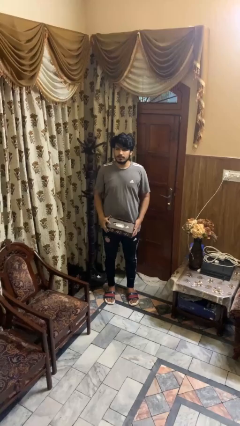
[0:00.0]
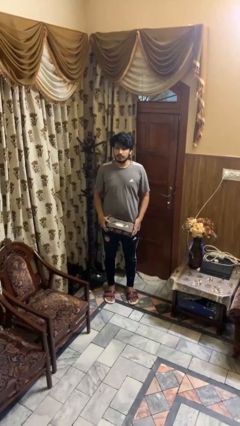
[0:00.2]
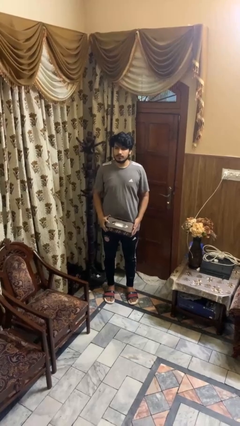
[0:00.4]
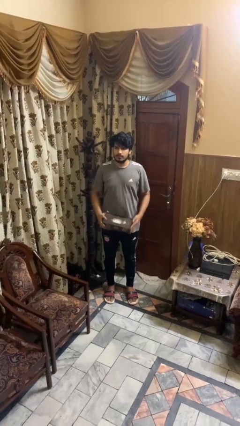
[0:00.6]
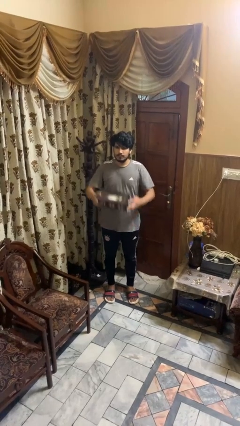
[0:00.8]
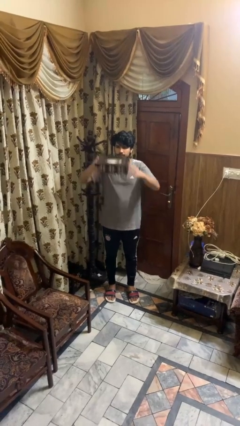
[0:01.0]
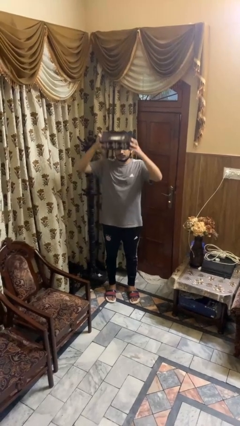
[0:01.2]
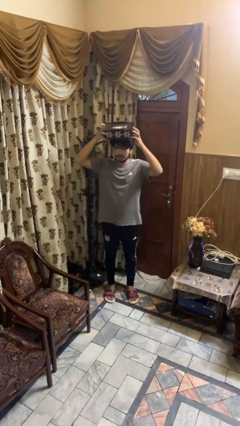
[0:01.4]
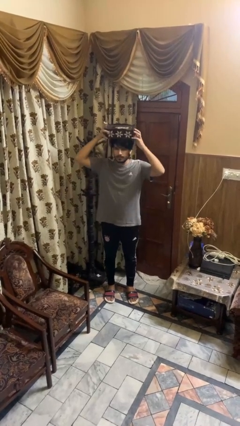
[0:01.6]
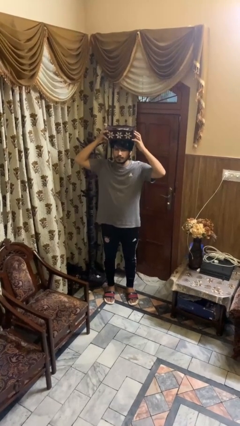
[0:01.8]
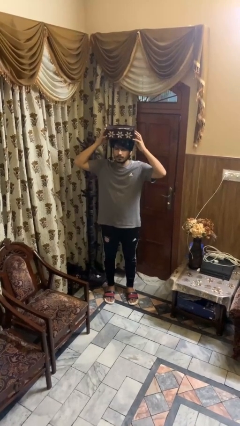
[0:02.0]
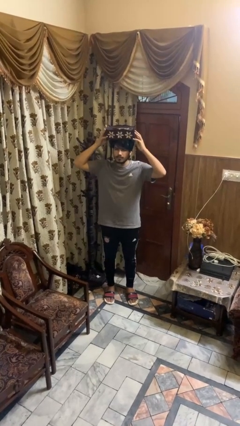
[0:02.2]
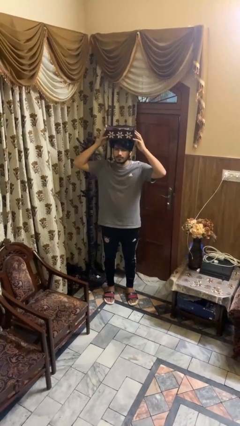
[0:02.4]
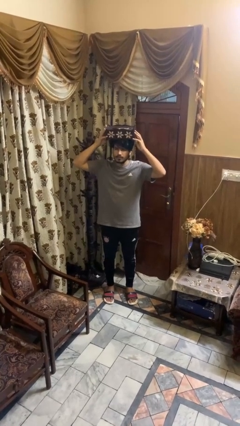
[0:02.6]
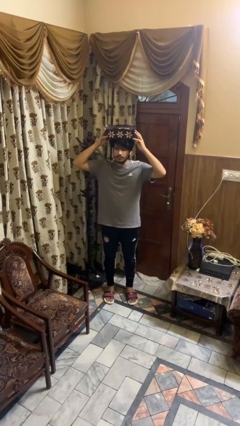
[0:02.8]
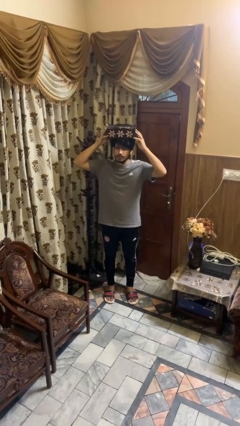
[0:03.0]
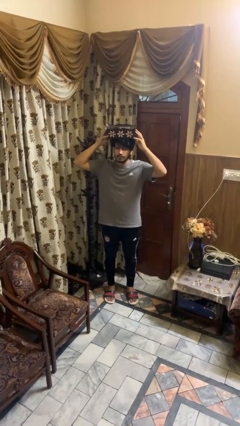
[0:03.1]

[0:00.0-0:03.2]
person holds object above head

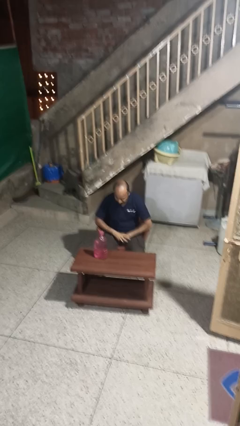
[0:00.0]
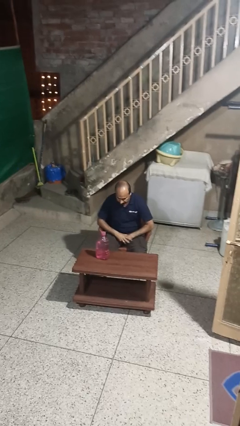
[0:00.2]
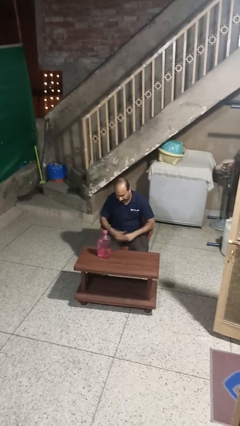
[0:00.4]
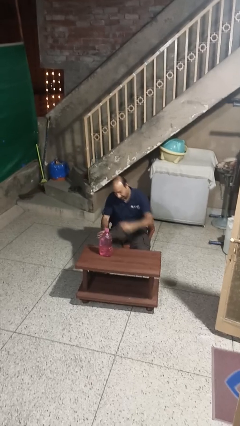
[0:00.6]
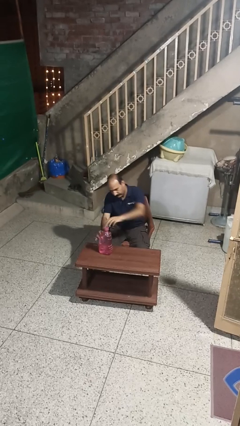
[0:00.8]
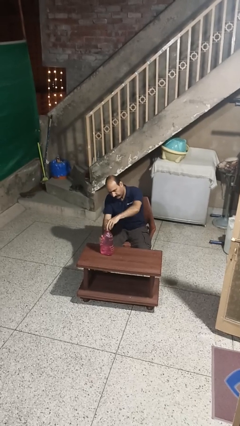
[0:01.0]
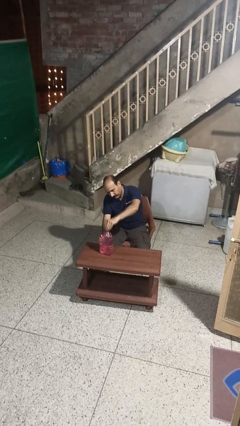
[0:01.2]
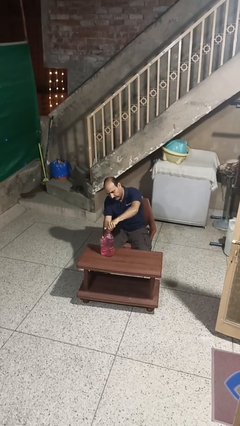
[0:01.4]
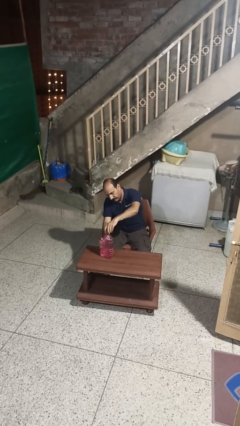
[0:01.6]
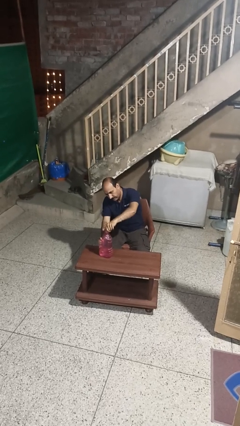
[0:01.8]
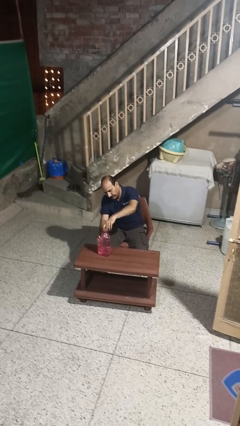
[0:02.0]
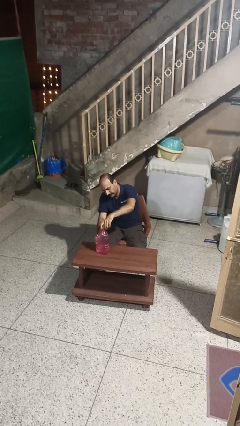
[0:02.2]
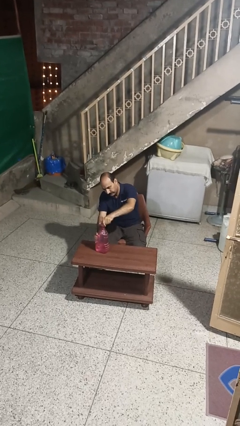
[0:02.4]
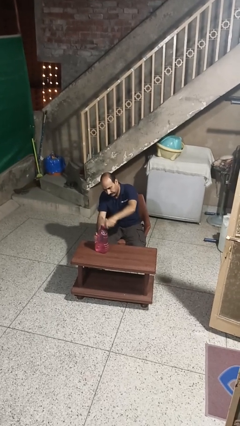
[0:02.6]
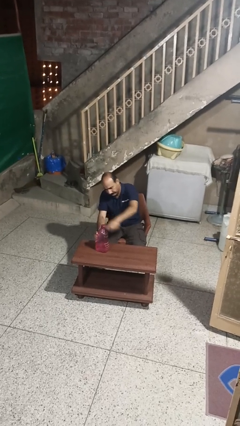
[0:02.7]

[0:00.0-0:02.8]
person unscrews lid from bottle

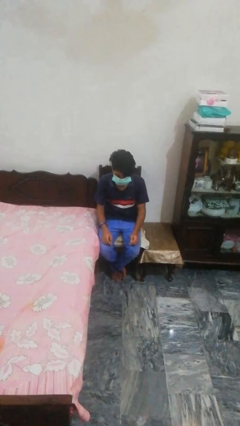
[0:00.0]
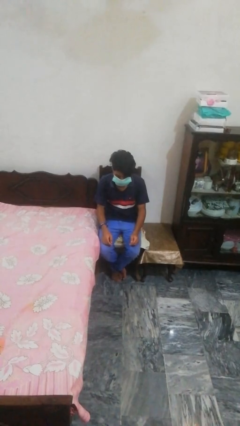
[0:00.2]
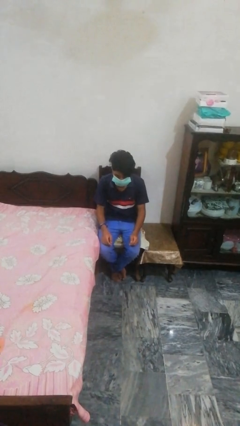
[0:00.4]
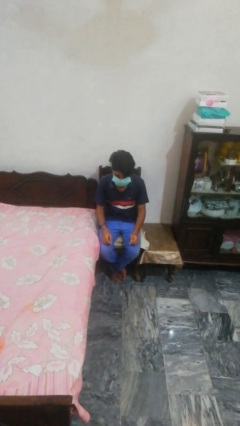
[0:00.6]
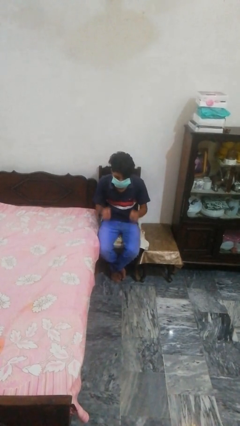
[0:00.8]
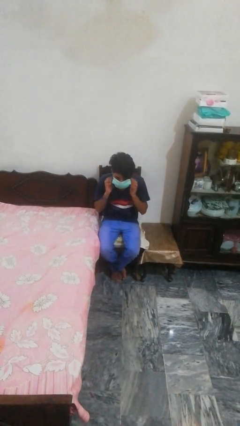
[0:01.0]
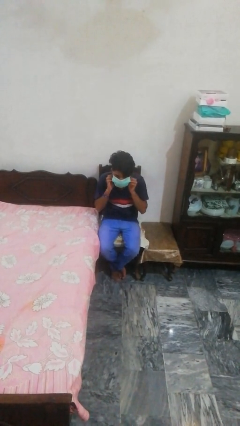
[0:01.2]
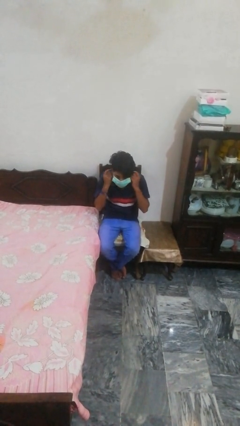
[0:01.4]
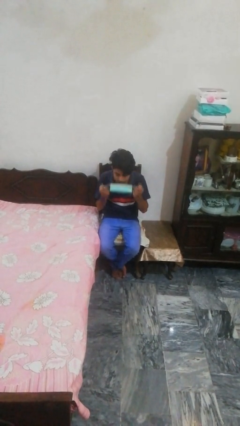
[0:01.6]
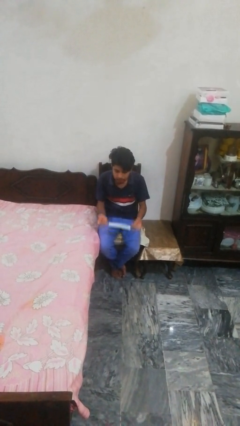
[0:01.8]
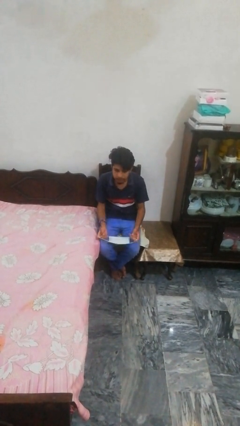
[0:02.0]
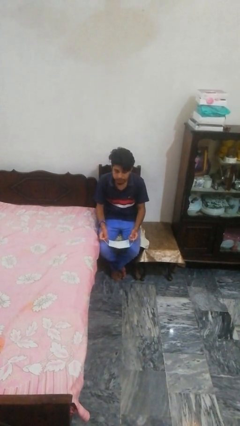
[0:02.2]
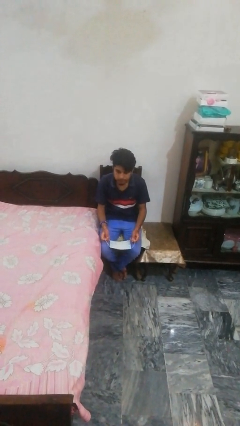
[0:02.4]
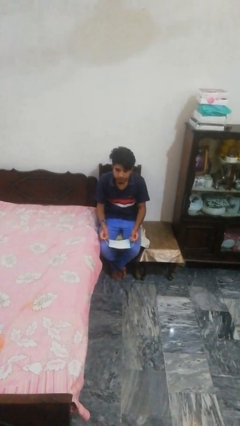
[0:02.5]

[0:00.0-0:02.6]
person takes off facemask

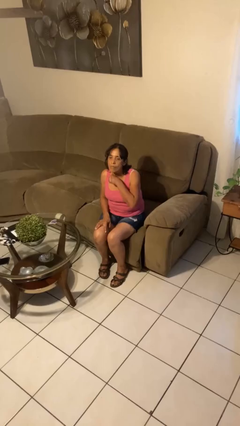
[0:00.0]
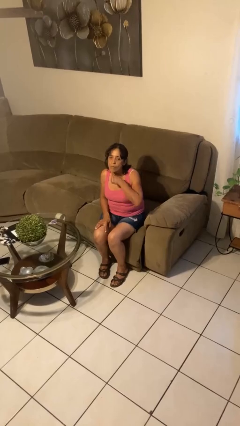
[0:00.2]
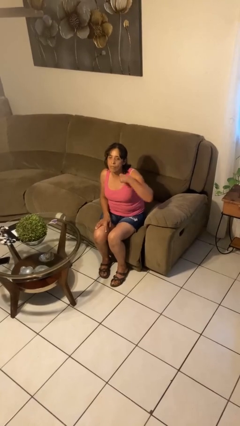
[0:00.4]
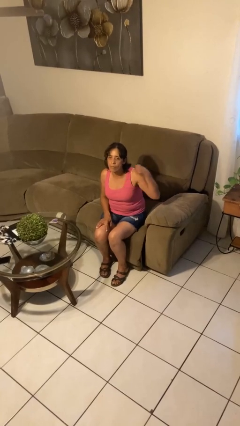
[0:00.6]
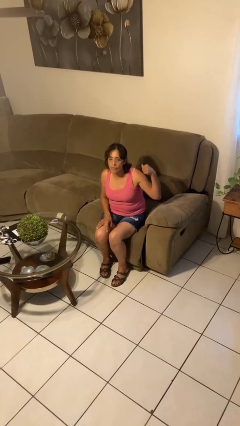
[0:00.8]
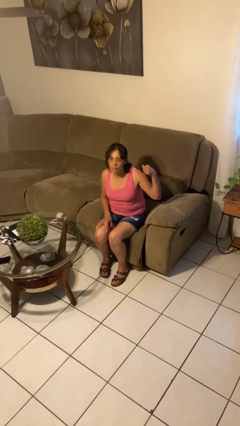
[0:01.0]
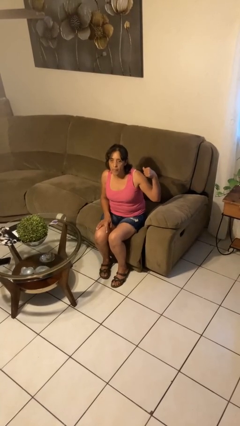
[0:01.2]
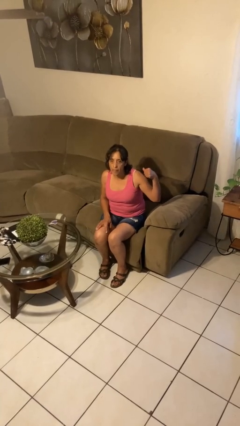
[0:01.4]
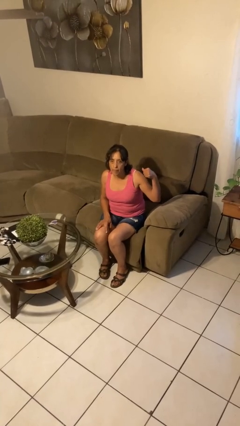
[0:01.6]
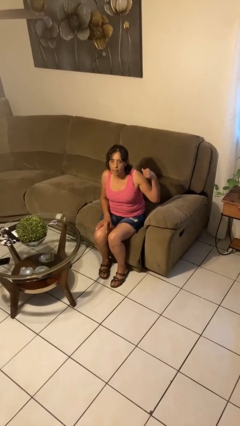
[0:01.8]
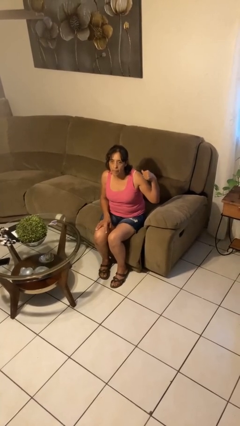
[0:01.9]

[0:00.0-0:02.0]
person gestures cut

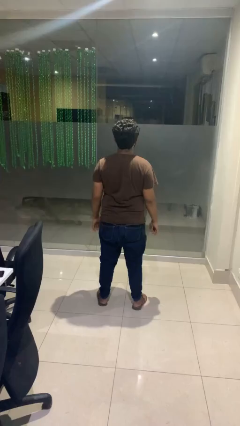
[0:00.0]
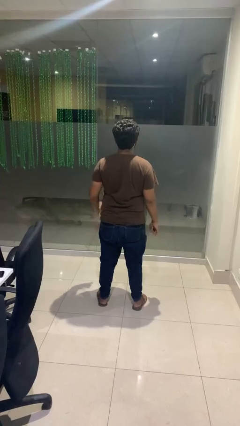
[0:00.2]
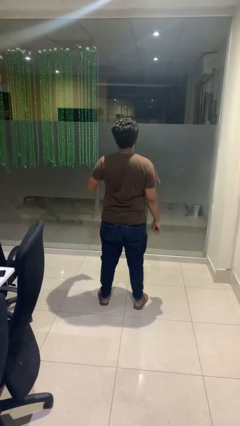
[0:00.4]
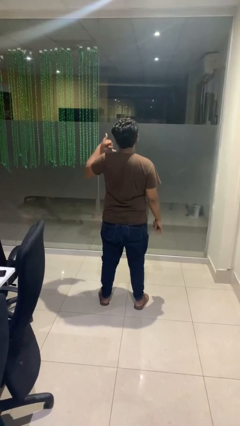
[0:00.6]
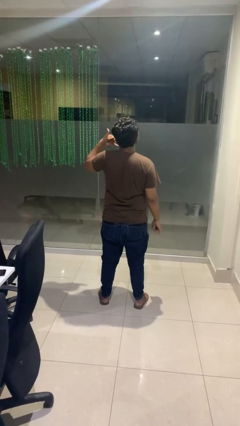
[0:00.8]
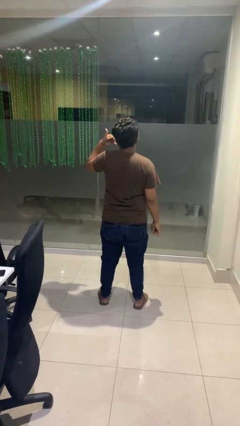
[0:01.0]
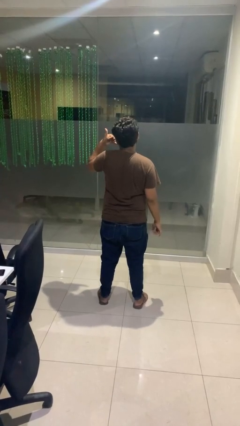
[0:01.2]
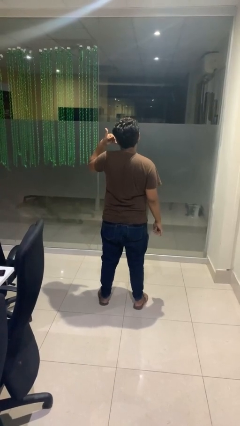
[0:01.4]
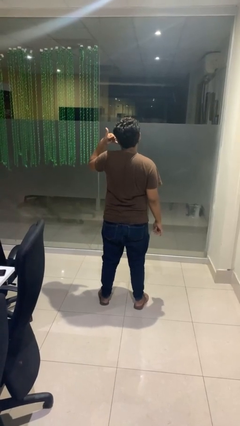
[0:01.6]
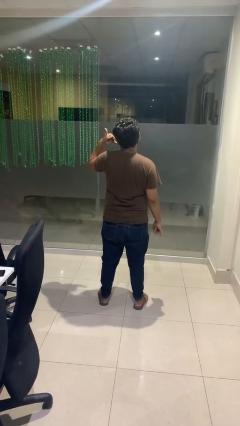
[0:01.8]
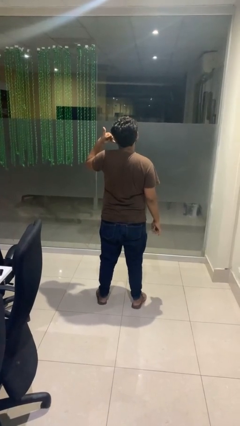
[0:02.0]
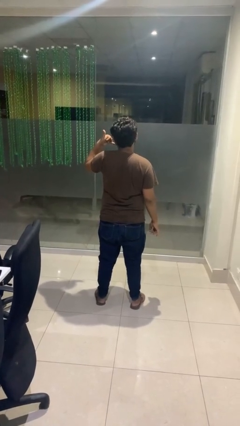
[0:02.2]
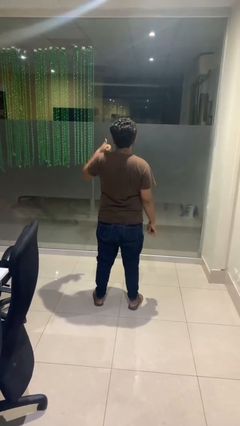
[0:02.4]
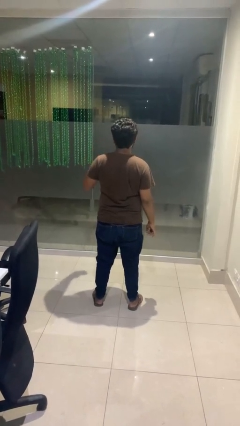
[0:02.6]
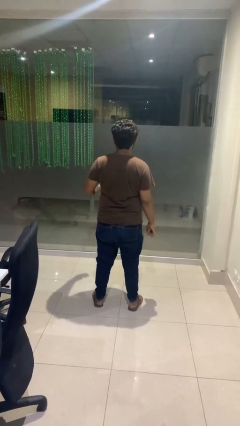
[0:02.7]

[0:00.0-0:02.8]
person gestures call me

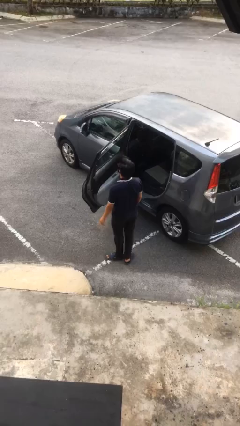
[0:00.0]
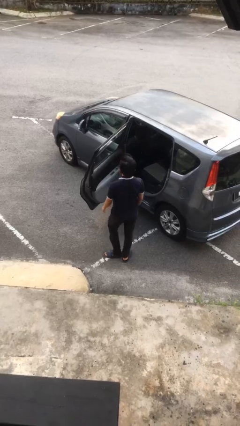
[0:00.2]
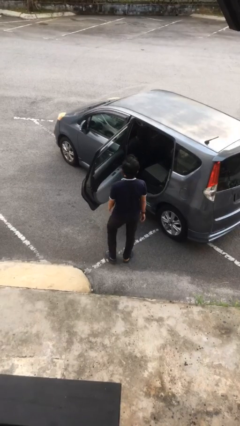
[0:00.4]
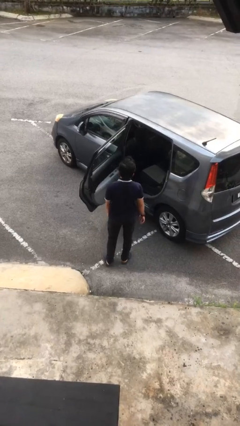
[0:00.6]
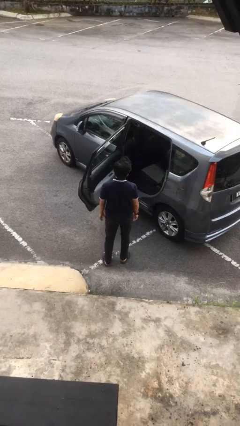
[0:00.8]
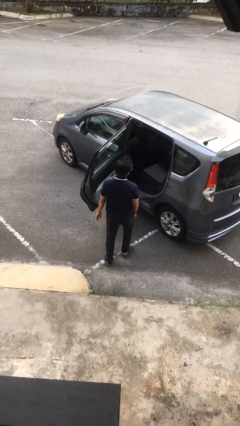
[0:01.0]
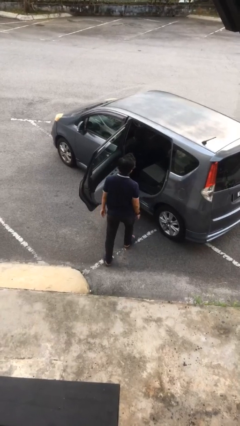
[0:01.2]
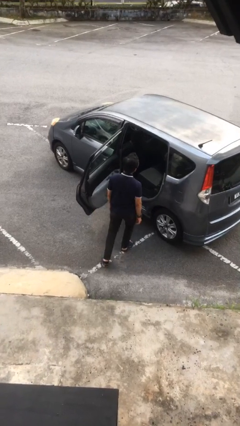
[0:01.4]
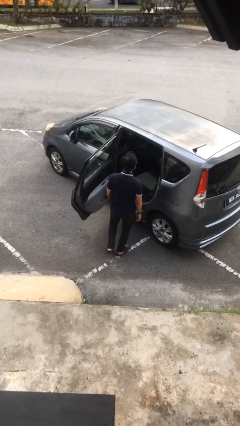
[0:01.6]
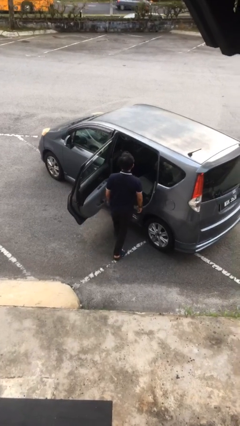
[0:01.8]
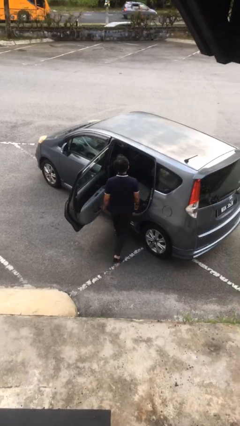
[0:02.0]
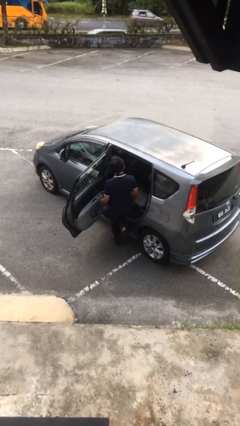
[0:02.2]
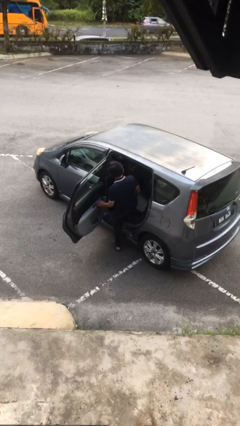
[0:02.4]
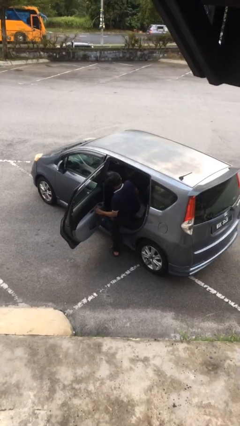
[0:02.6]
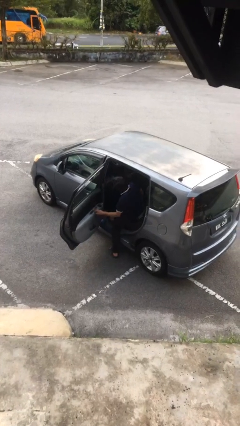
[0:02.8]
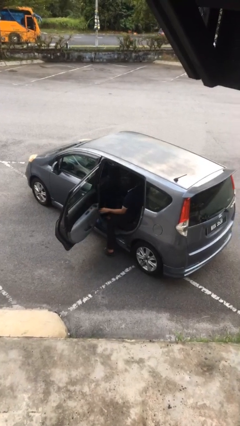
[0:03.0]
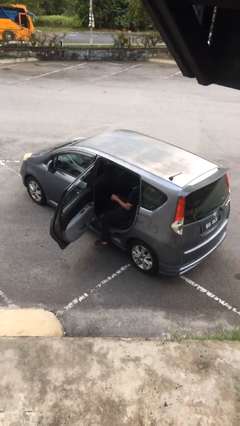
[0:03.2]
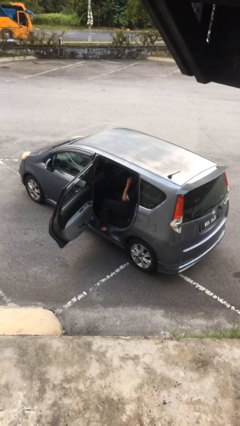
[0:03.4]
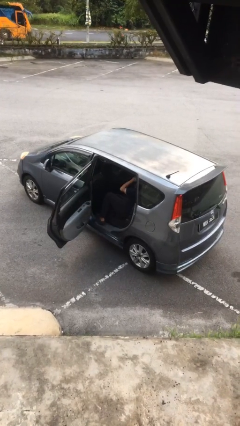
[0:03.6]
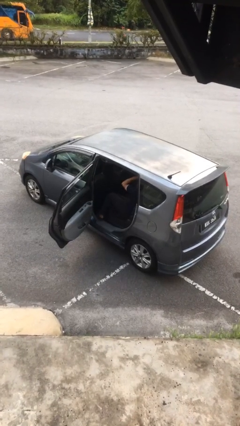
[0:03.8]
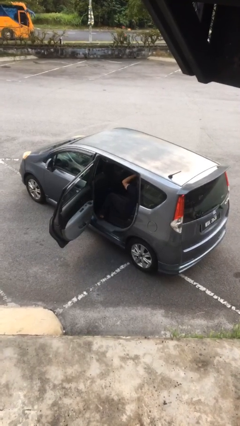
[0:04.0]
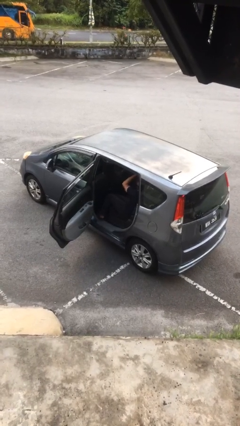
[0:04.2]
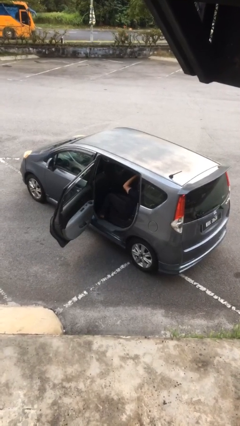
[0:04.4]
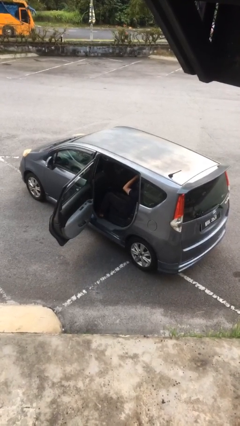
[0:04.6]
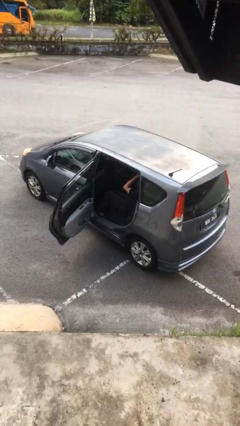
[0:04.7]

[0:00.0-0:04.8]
person enters car
